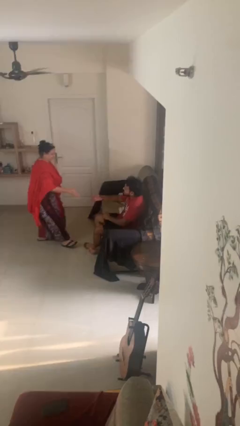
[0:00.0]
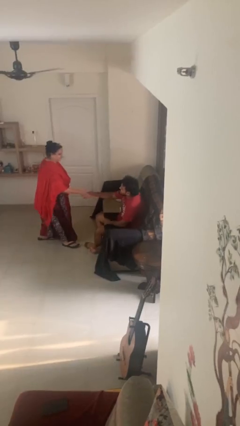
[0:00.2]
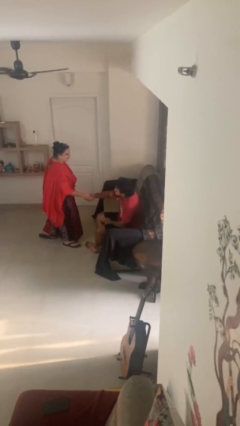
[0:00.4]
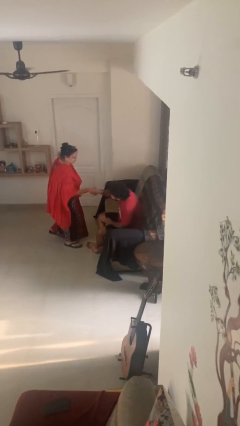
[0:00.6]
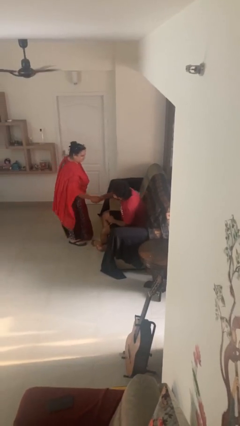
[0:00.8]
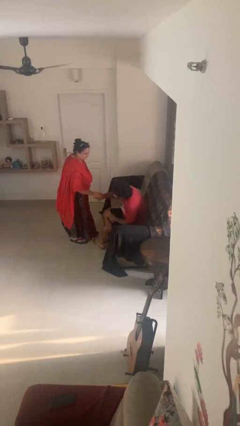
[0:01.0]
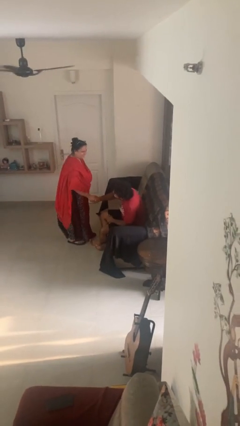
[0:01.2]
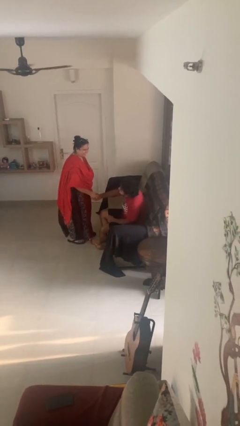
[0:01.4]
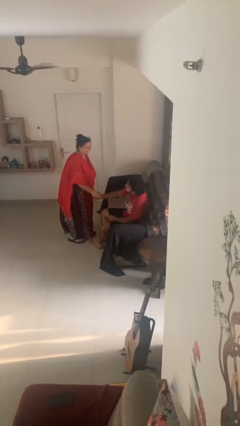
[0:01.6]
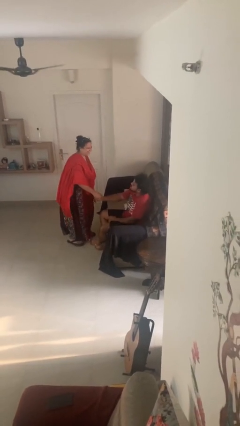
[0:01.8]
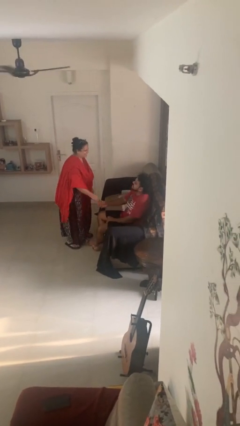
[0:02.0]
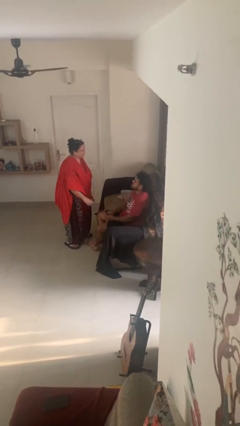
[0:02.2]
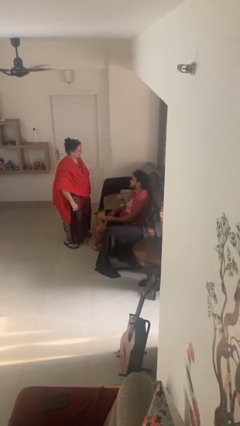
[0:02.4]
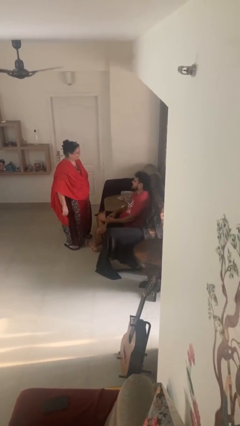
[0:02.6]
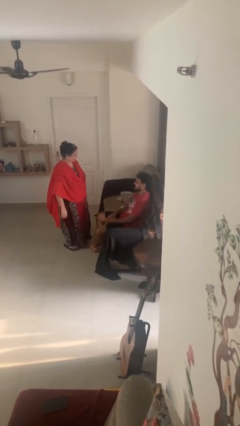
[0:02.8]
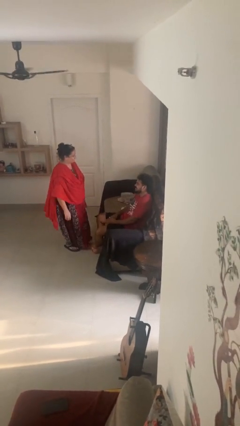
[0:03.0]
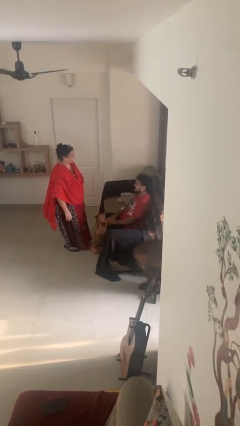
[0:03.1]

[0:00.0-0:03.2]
person shakes hand

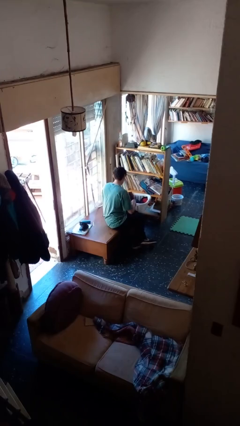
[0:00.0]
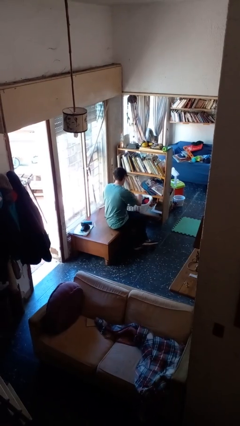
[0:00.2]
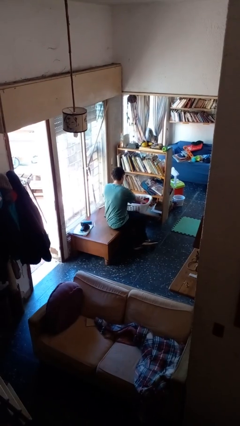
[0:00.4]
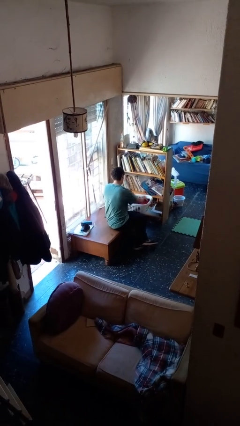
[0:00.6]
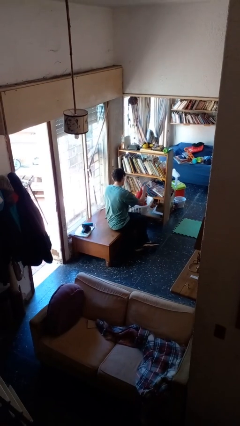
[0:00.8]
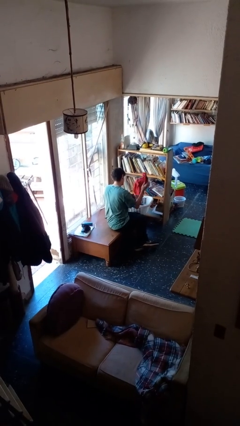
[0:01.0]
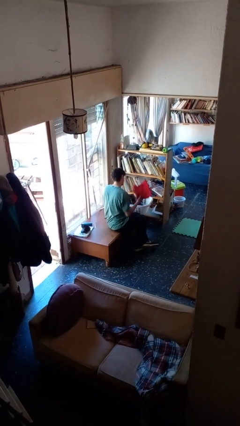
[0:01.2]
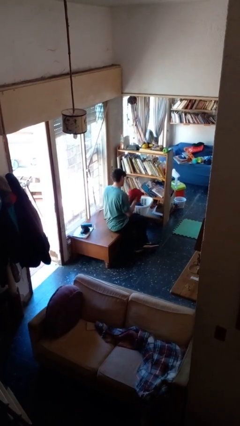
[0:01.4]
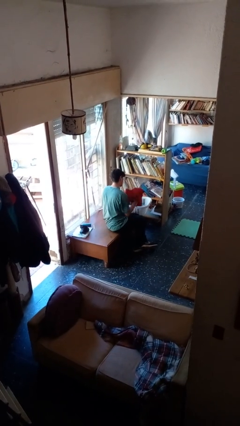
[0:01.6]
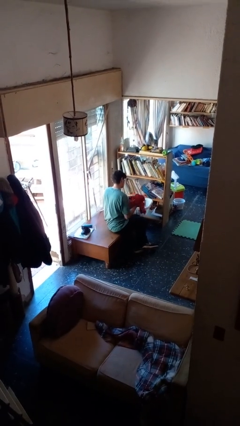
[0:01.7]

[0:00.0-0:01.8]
person takes object from basket

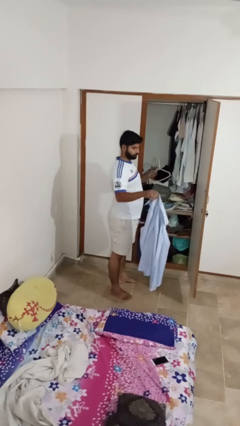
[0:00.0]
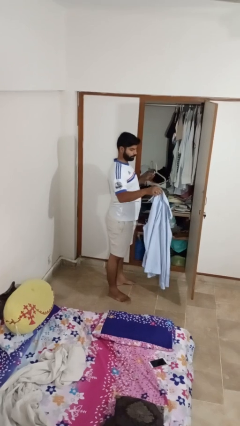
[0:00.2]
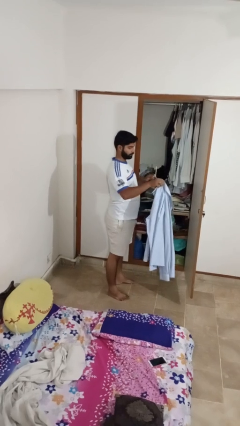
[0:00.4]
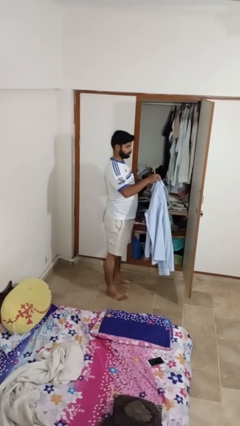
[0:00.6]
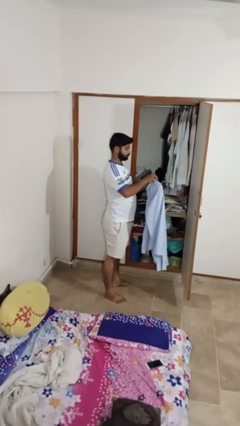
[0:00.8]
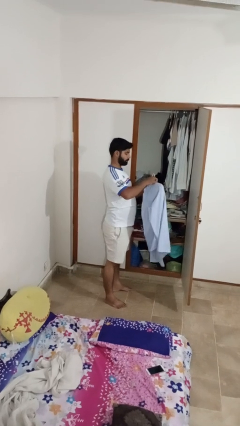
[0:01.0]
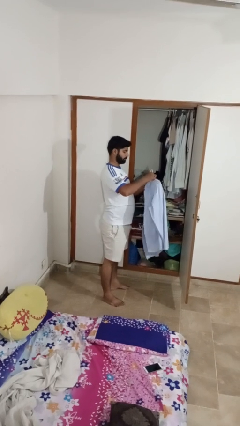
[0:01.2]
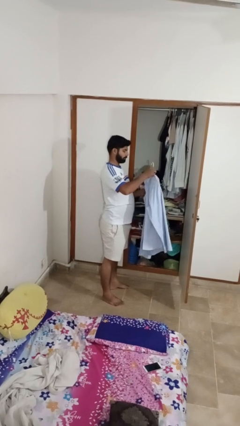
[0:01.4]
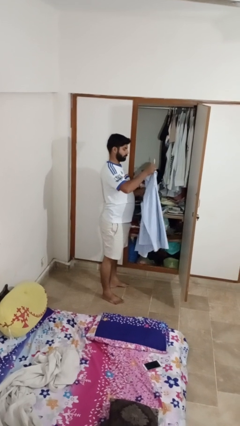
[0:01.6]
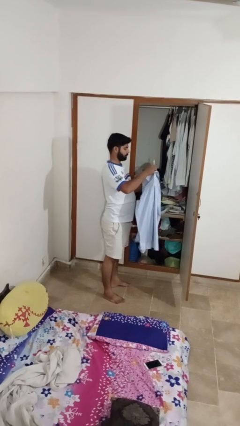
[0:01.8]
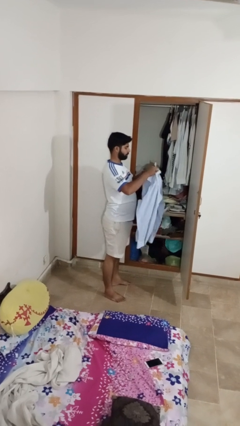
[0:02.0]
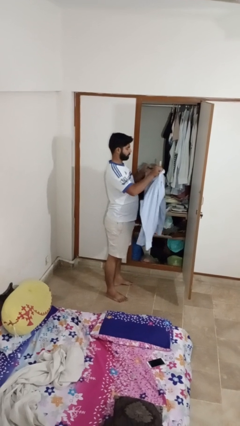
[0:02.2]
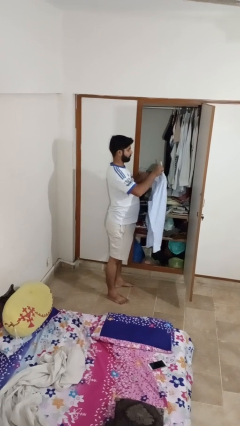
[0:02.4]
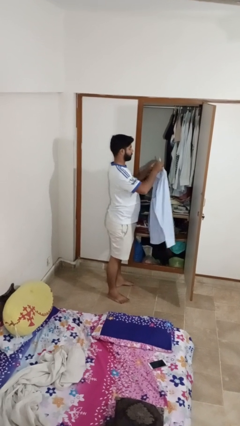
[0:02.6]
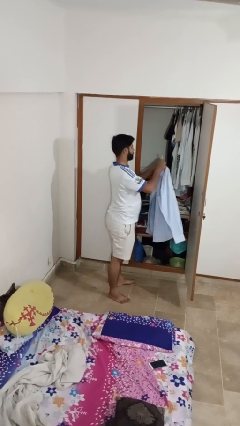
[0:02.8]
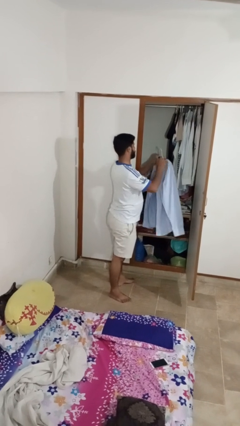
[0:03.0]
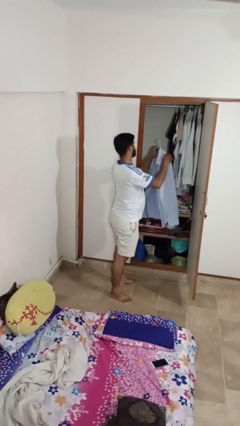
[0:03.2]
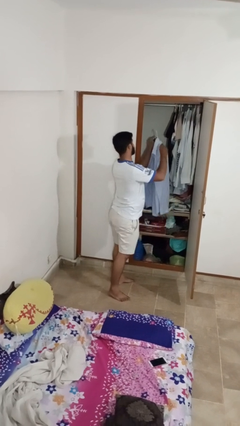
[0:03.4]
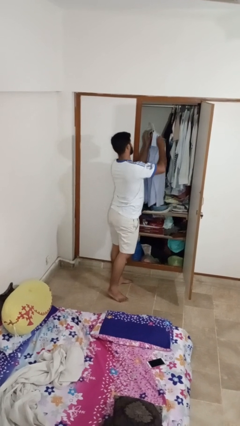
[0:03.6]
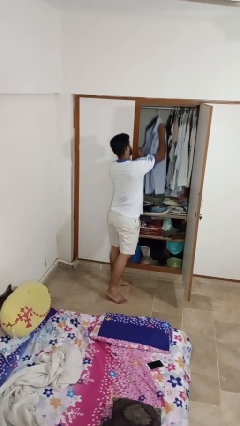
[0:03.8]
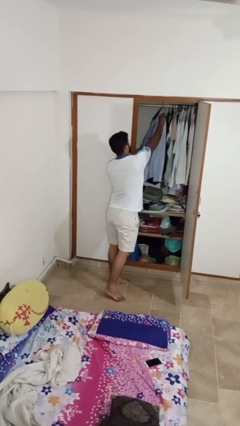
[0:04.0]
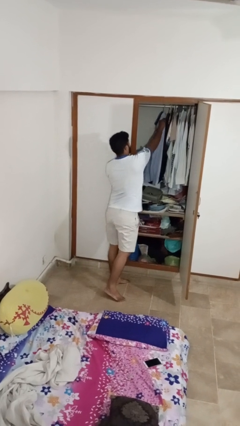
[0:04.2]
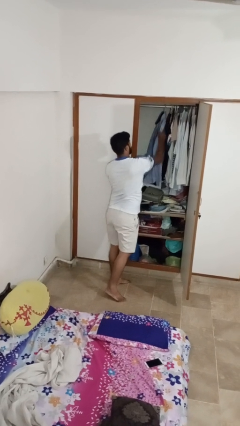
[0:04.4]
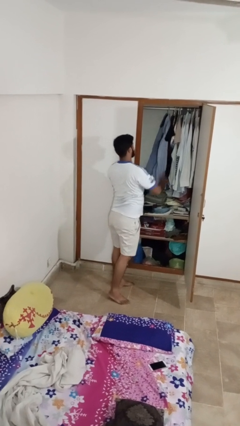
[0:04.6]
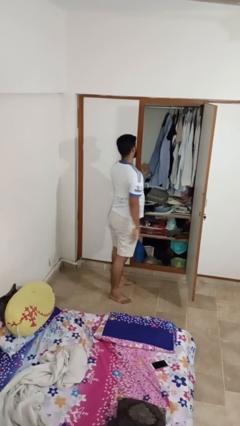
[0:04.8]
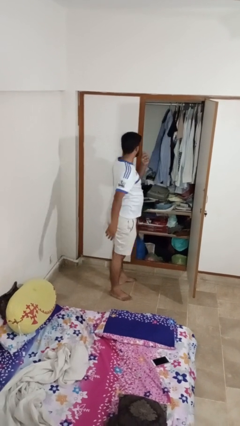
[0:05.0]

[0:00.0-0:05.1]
person puts clothes into closet

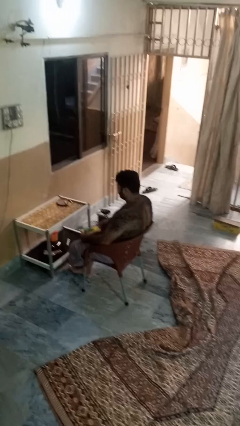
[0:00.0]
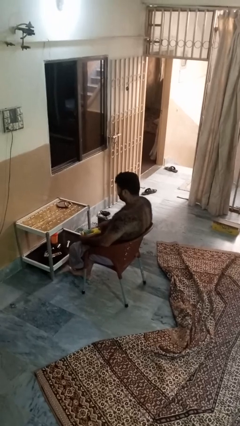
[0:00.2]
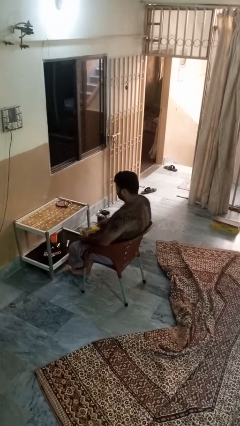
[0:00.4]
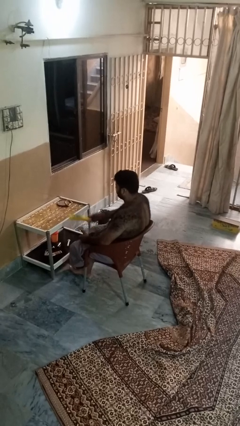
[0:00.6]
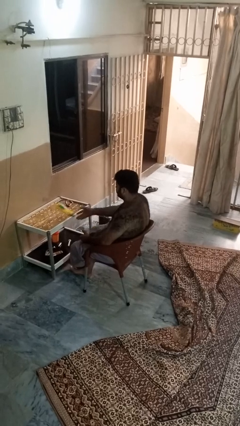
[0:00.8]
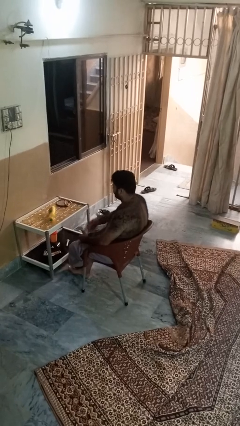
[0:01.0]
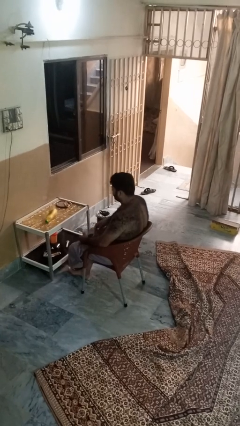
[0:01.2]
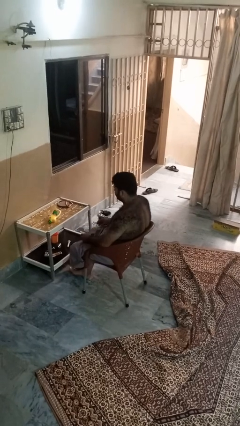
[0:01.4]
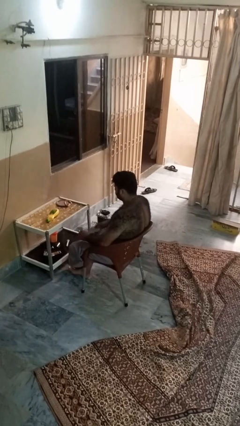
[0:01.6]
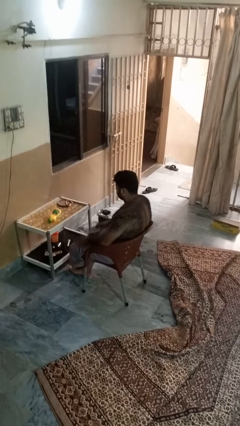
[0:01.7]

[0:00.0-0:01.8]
person throws object on table

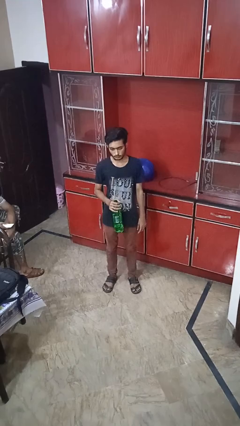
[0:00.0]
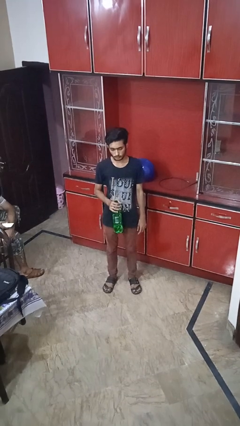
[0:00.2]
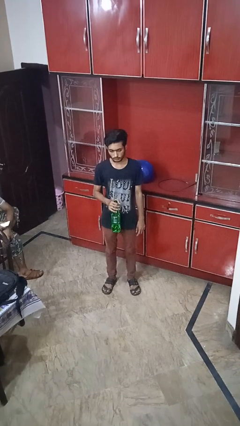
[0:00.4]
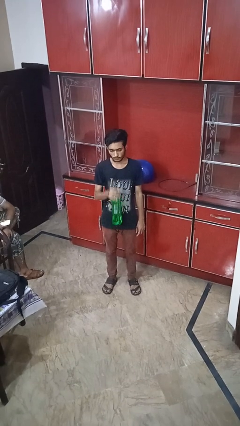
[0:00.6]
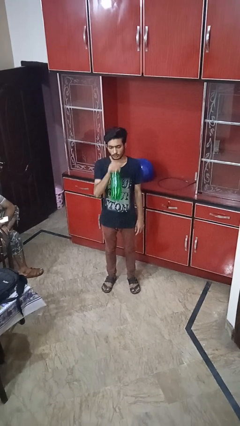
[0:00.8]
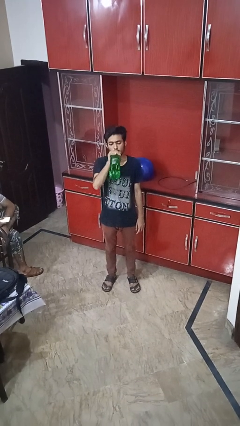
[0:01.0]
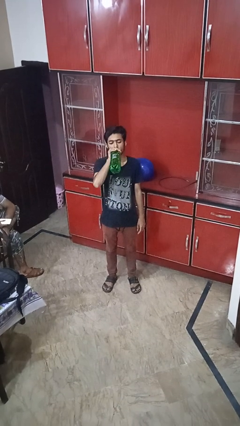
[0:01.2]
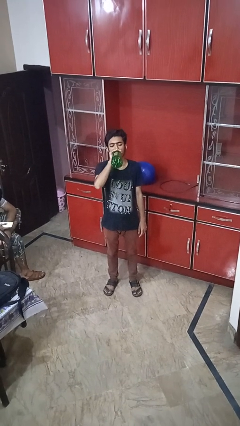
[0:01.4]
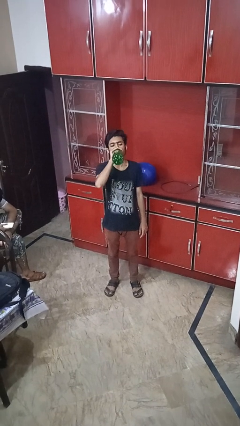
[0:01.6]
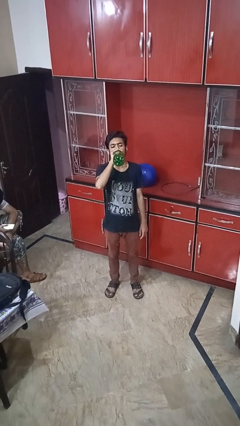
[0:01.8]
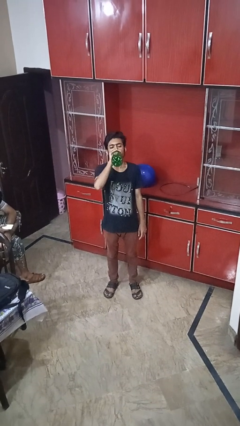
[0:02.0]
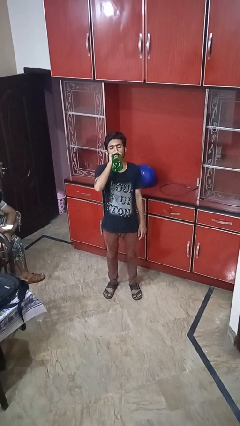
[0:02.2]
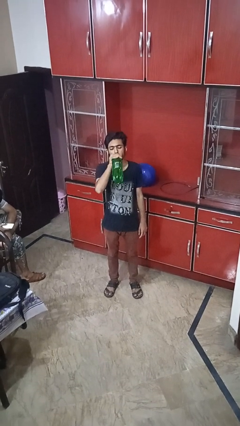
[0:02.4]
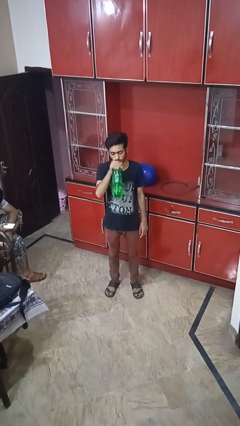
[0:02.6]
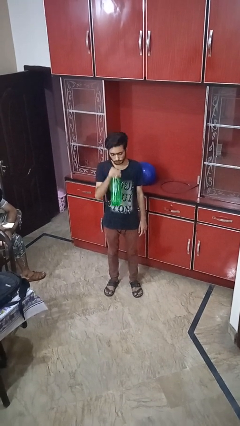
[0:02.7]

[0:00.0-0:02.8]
person drinks from bottle

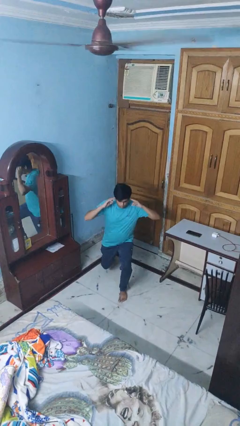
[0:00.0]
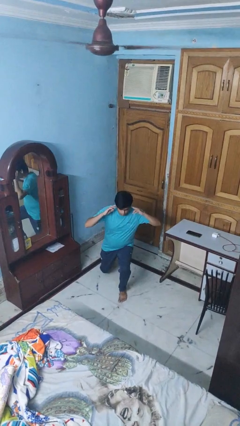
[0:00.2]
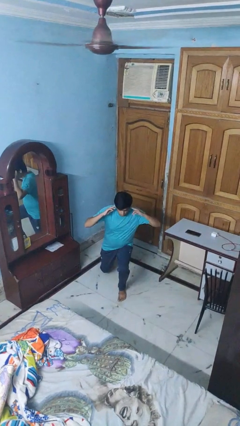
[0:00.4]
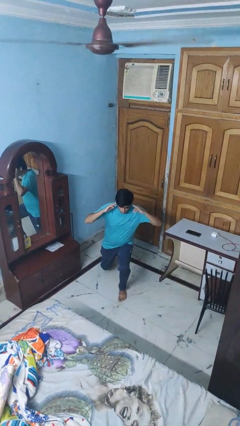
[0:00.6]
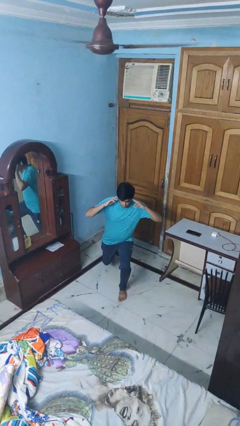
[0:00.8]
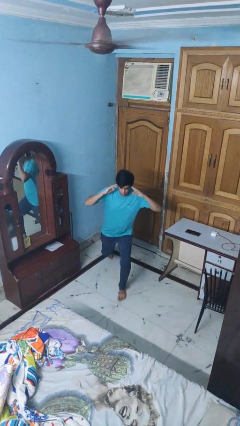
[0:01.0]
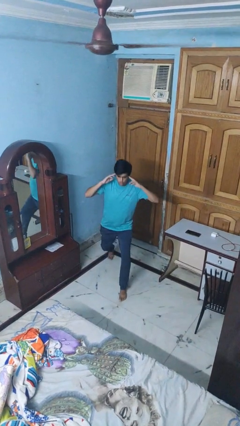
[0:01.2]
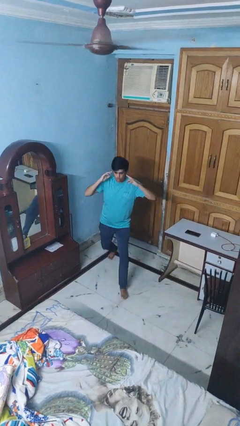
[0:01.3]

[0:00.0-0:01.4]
person exercises with lunges

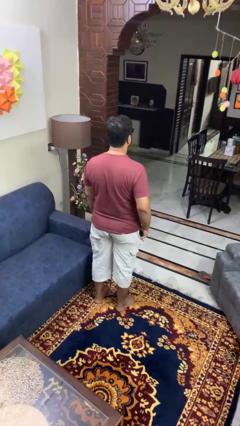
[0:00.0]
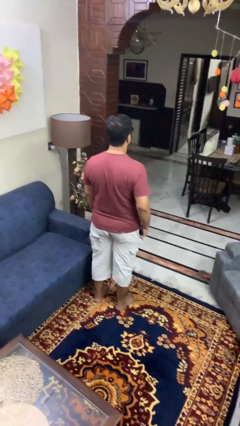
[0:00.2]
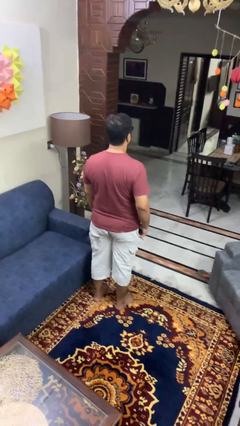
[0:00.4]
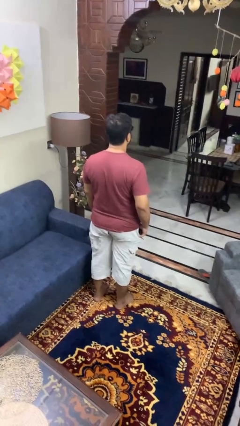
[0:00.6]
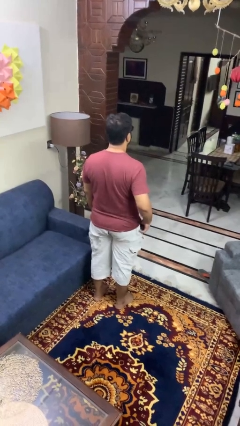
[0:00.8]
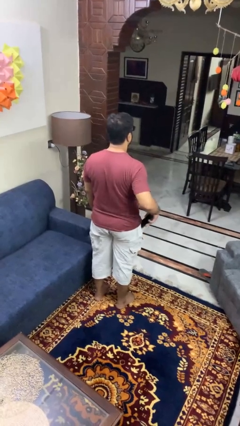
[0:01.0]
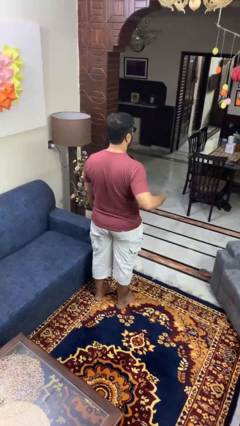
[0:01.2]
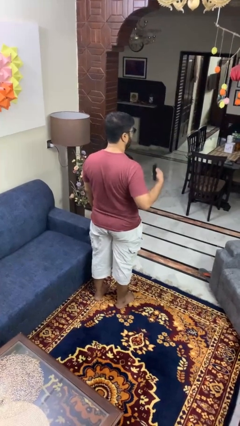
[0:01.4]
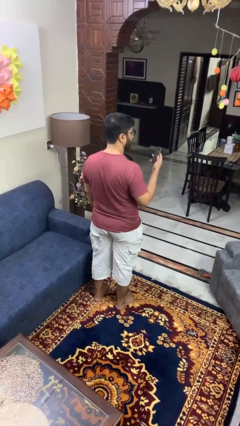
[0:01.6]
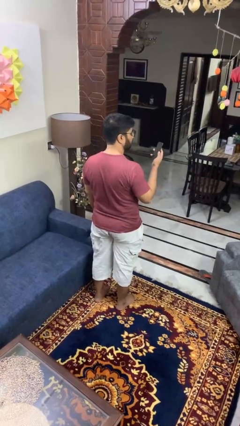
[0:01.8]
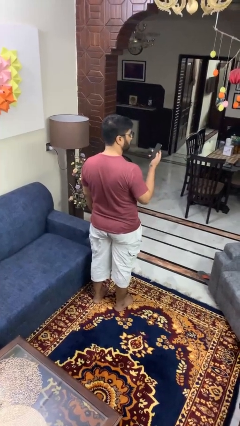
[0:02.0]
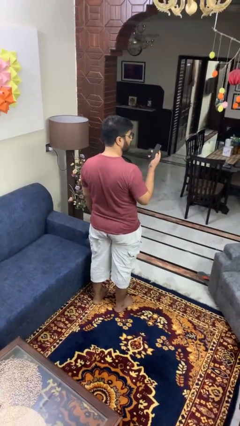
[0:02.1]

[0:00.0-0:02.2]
person takes phone from pocket
